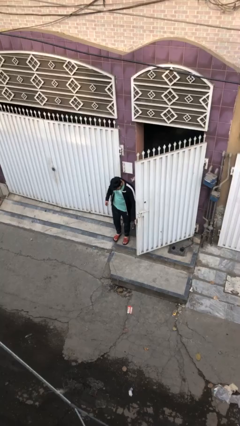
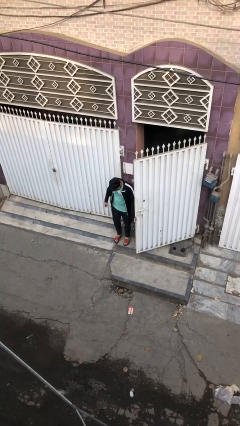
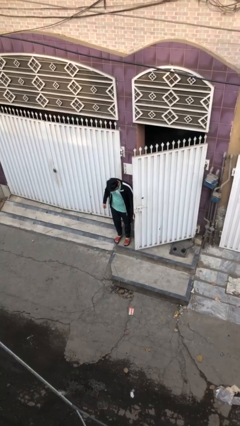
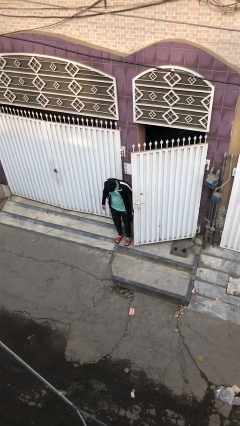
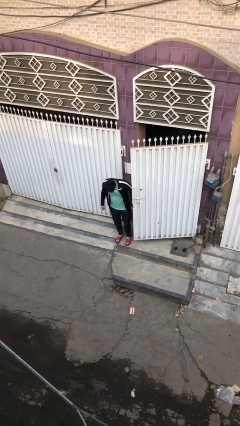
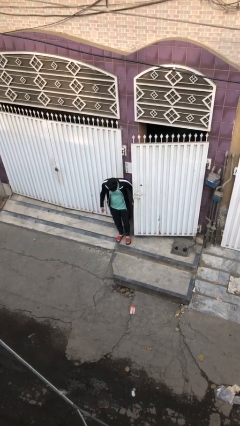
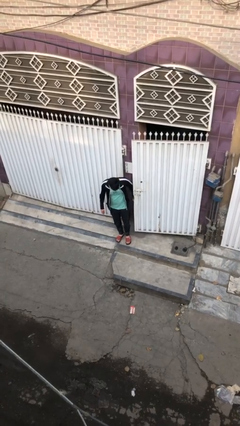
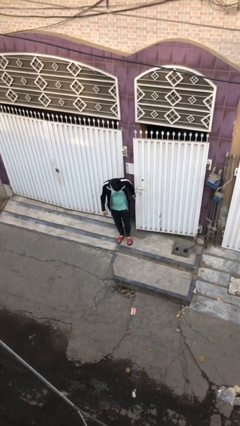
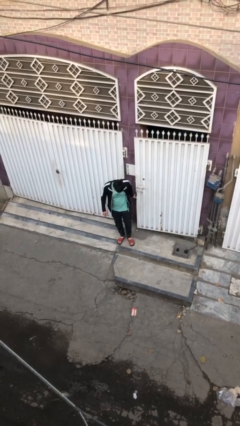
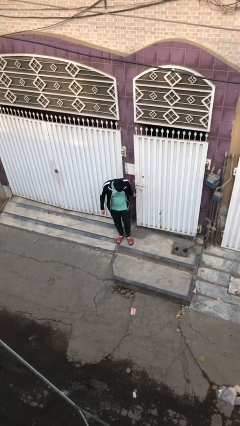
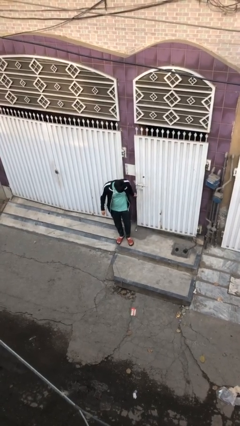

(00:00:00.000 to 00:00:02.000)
person closes facility door

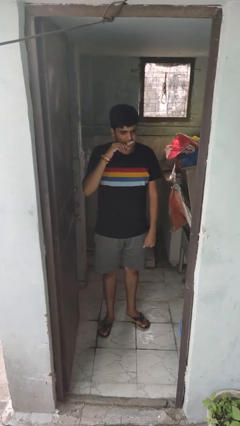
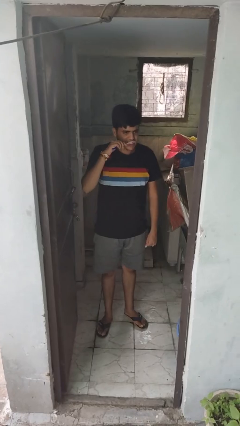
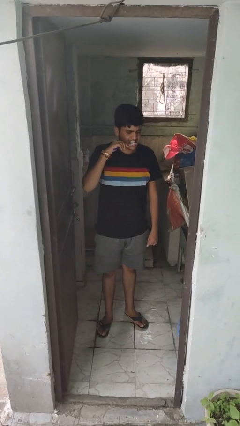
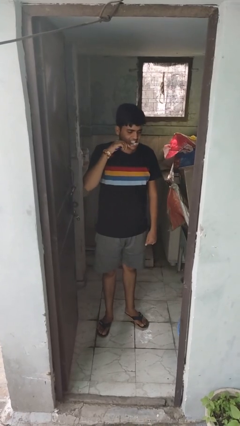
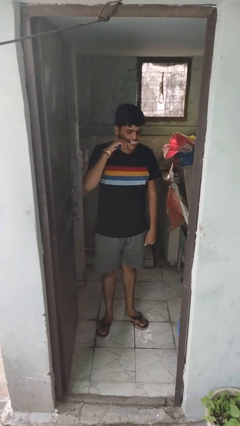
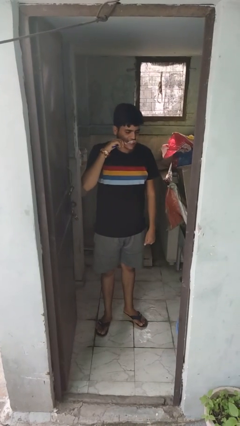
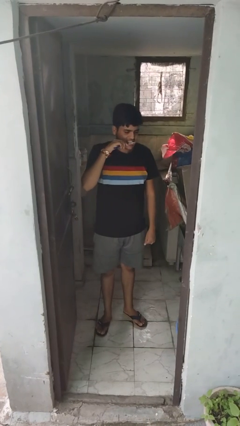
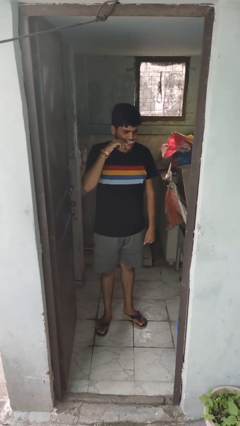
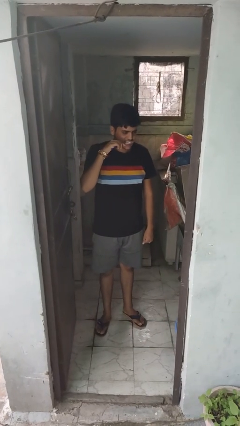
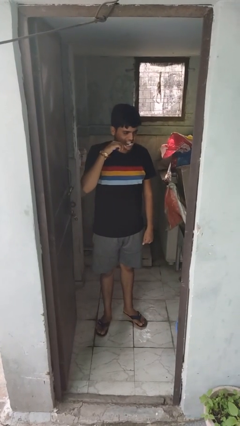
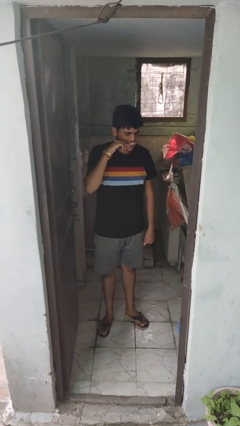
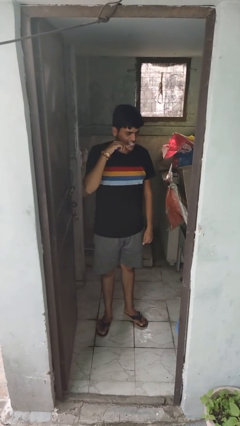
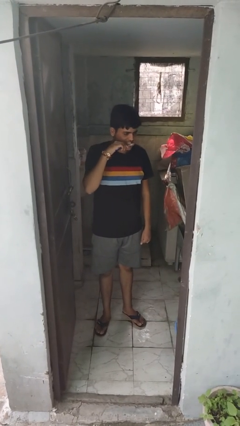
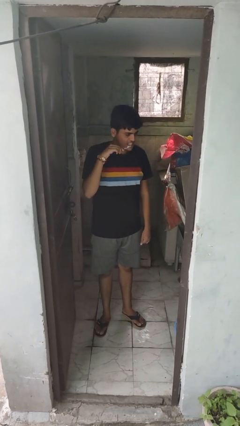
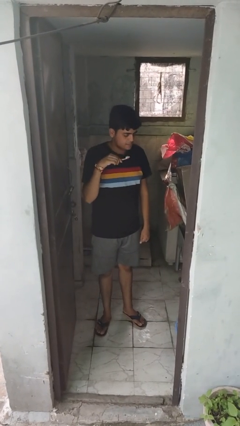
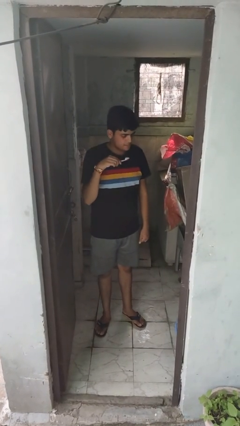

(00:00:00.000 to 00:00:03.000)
person brushes teeth

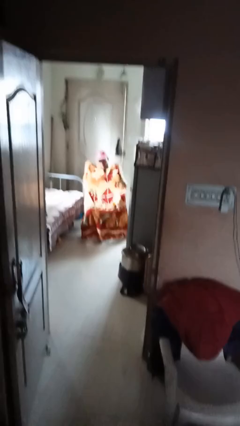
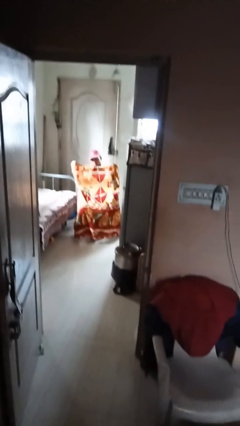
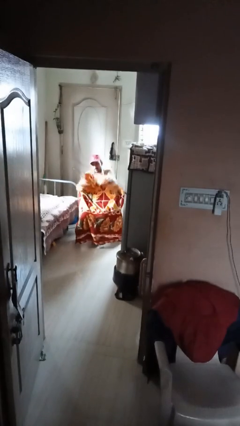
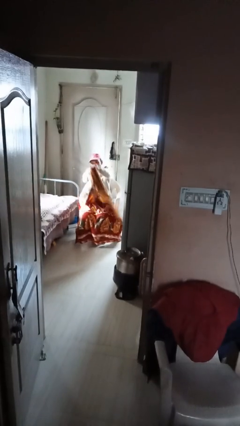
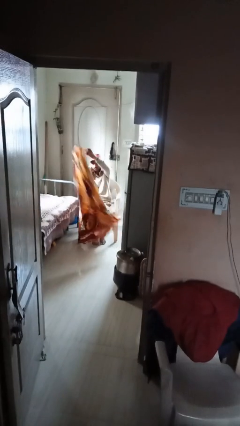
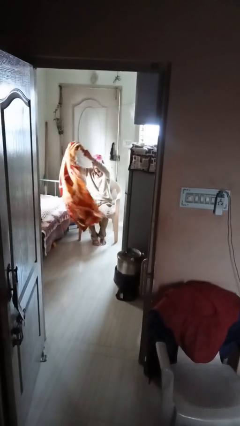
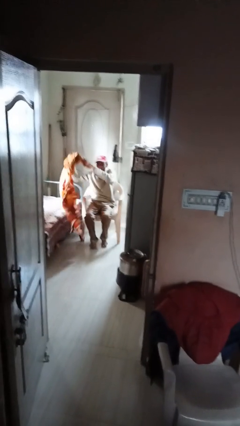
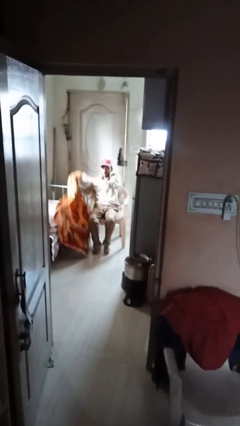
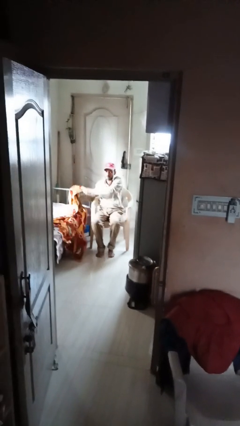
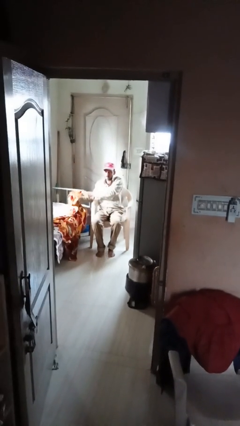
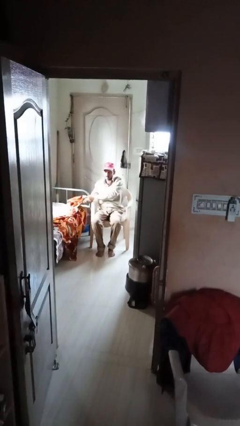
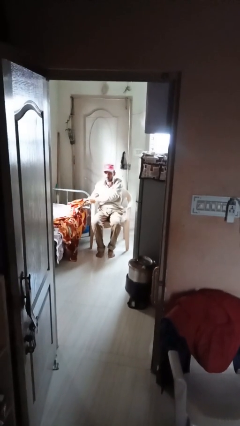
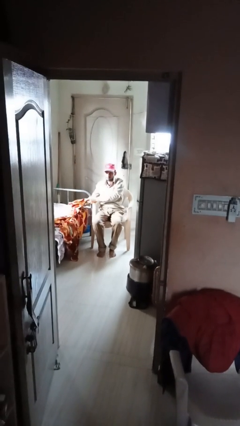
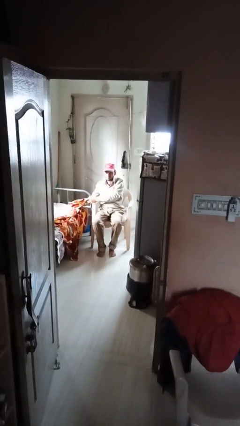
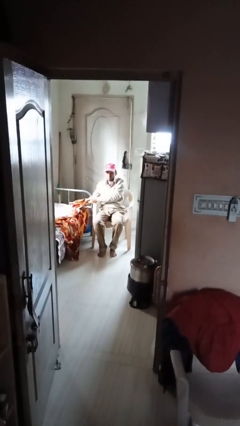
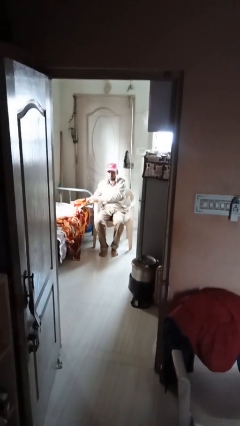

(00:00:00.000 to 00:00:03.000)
person uncovers with blanket

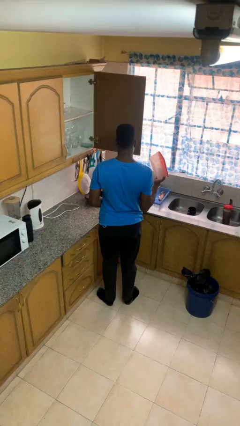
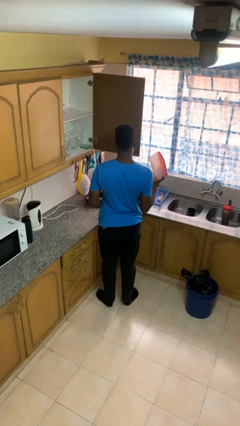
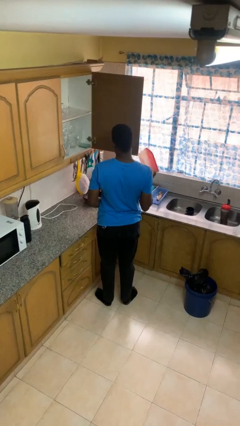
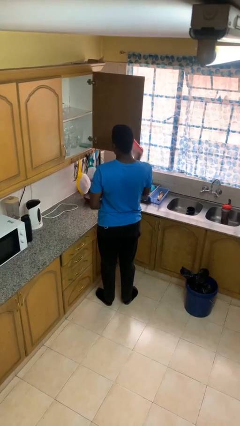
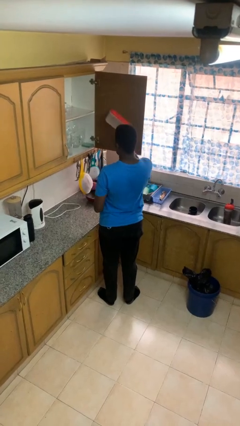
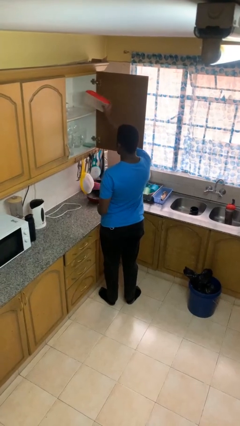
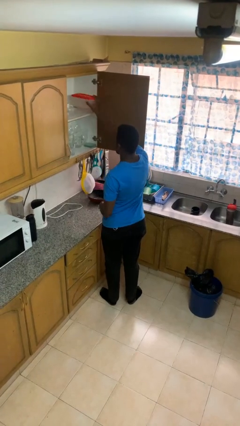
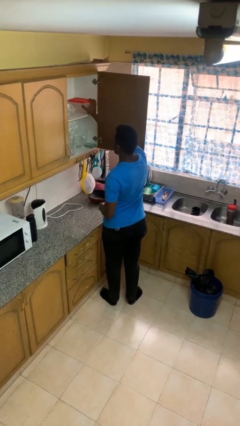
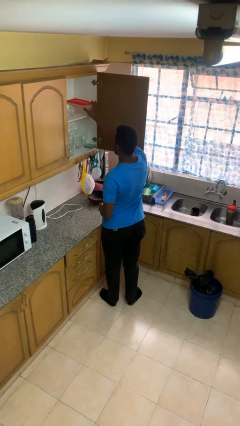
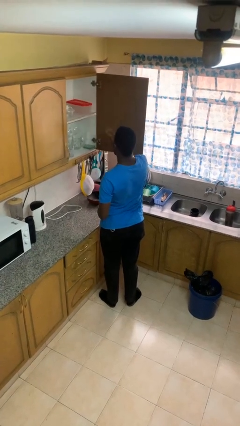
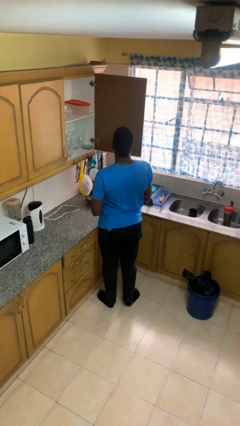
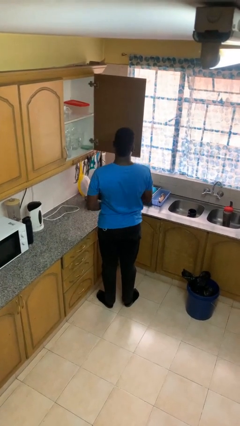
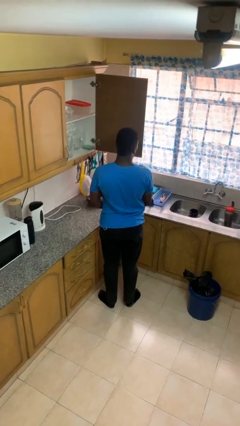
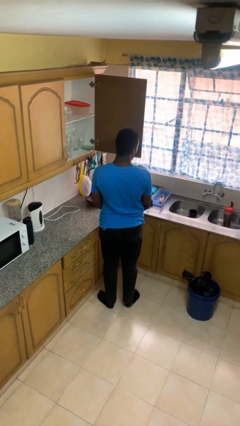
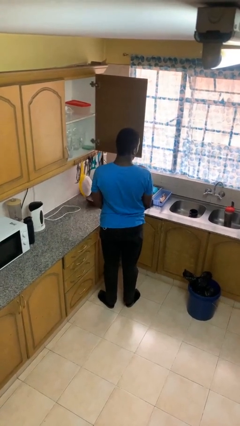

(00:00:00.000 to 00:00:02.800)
person puts down object into cabinet

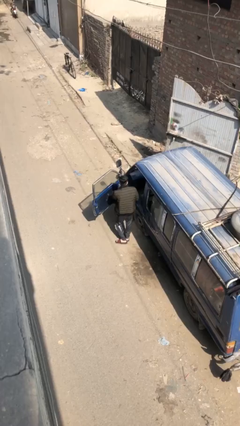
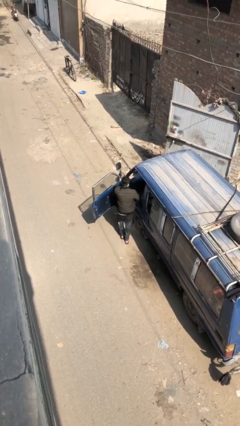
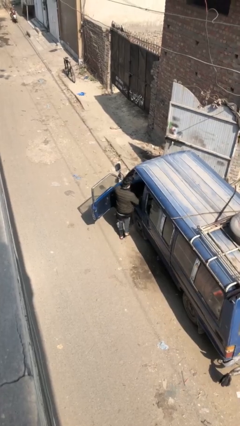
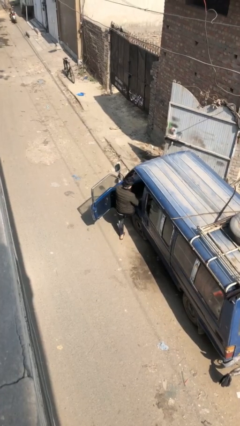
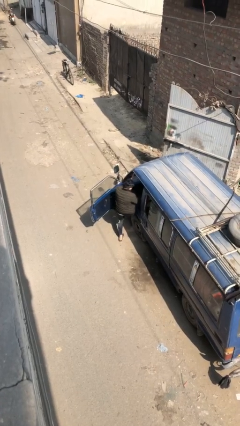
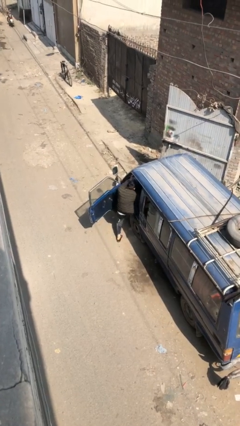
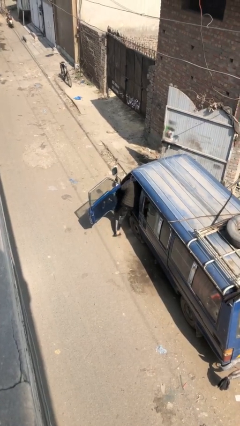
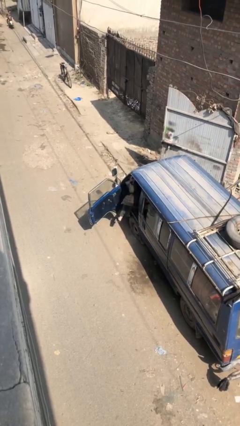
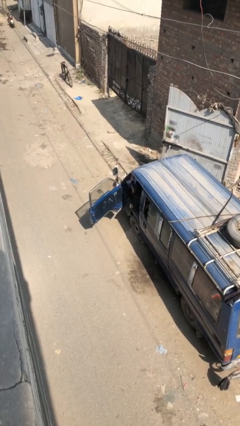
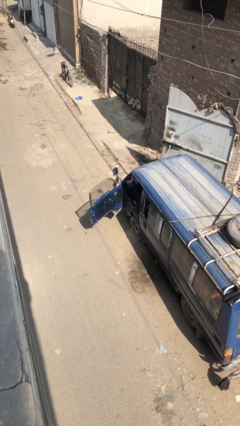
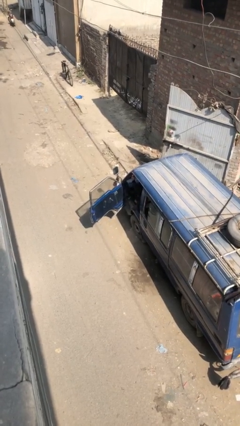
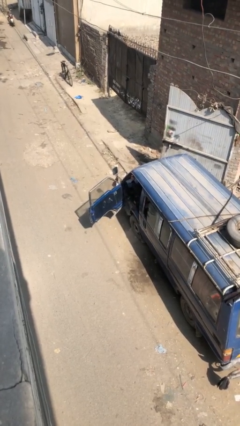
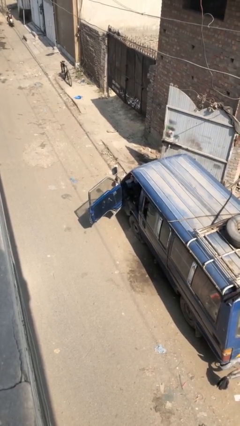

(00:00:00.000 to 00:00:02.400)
person enters car

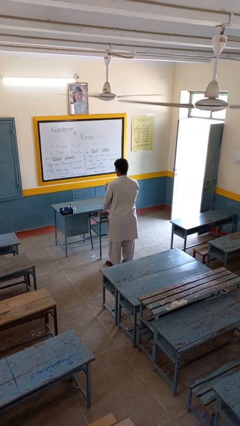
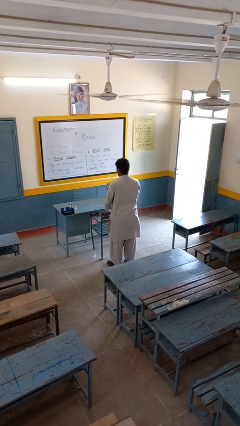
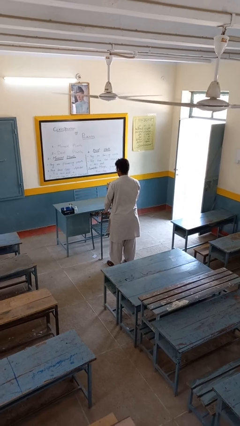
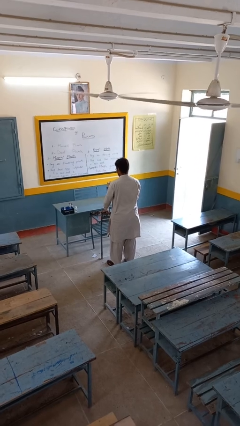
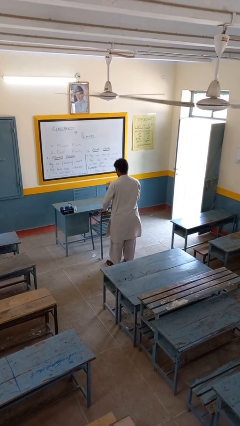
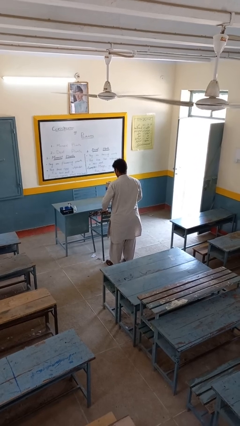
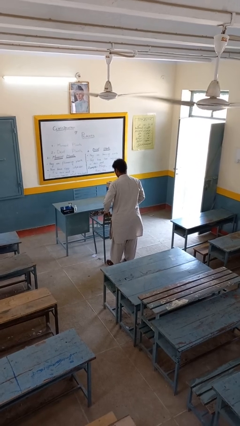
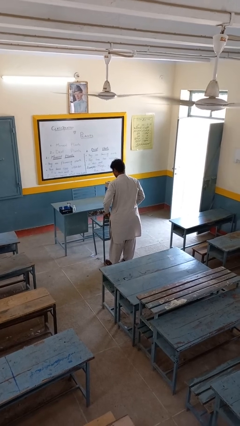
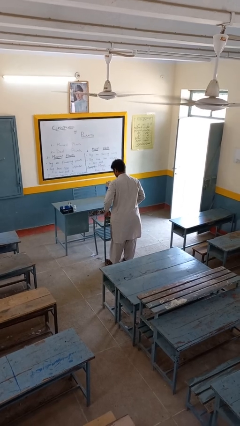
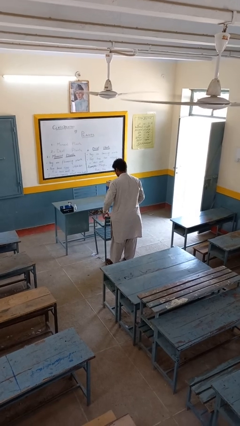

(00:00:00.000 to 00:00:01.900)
person pulls out chair

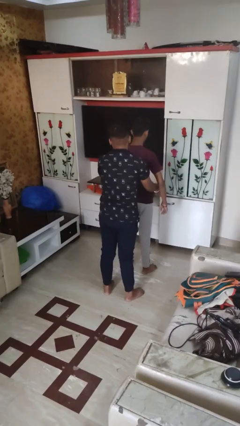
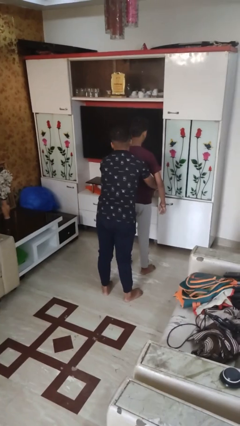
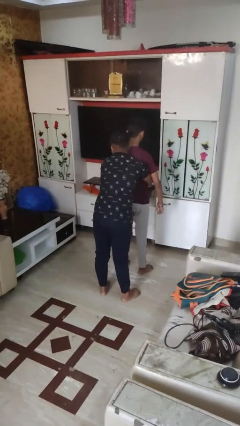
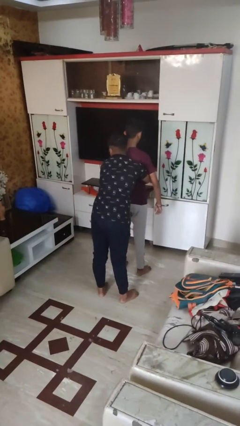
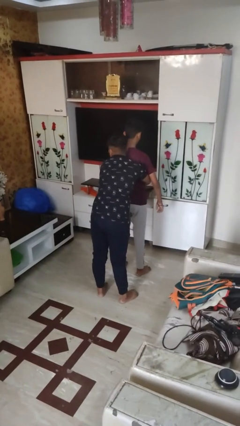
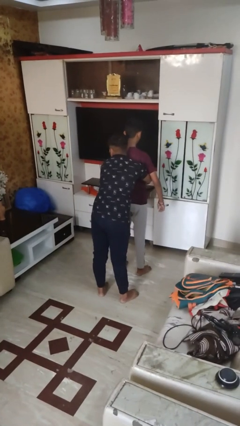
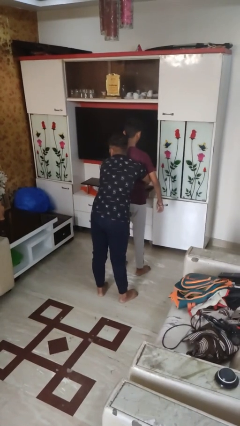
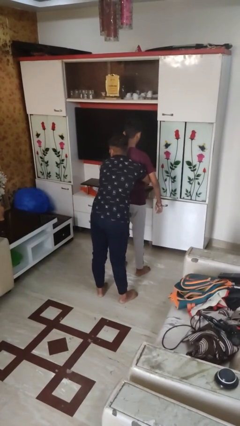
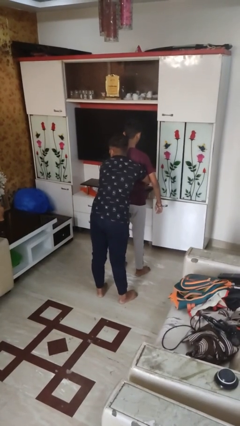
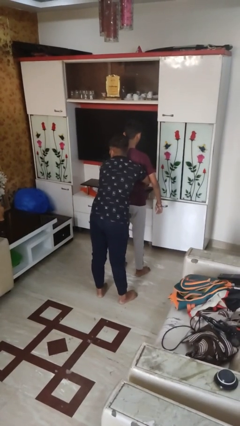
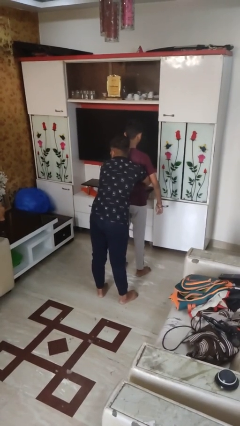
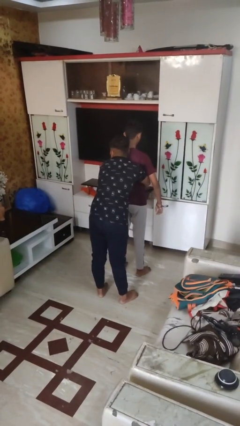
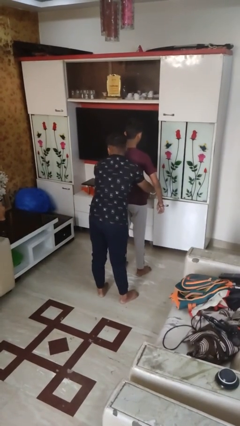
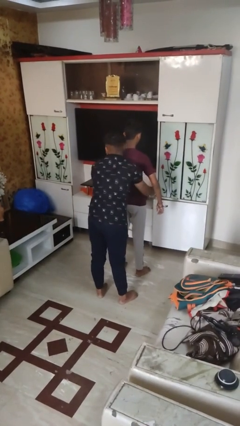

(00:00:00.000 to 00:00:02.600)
person hugs person from behind
